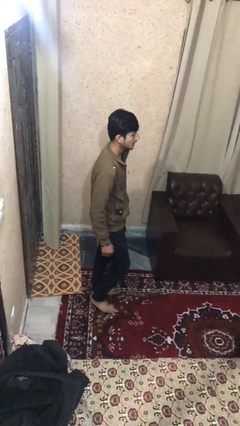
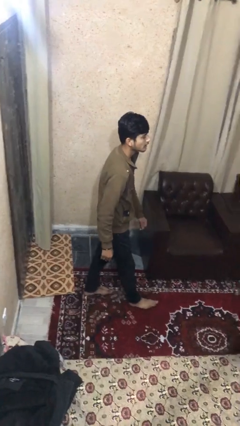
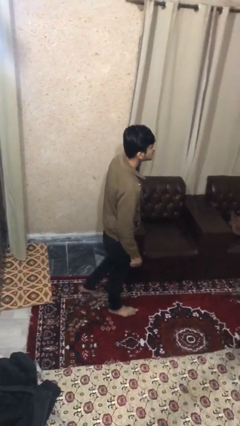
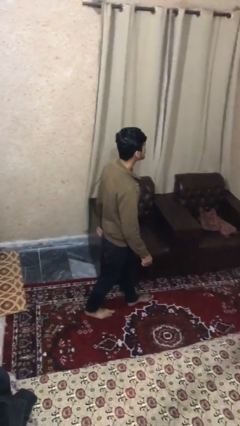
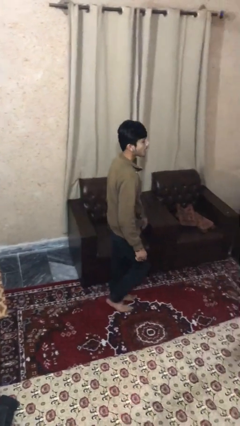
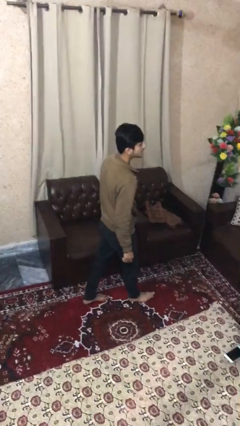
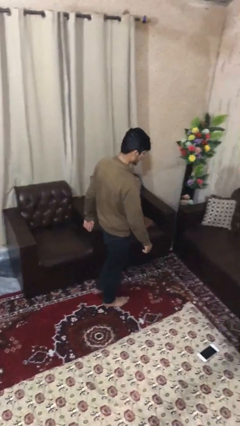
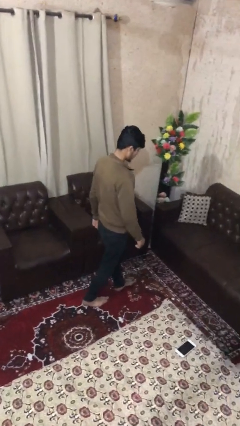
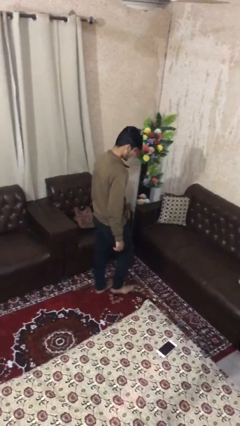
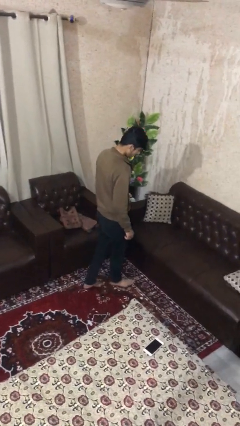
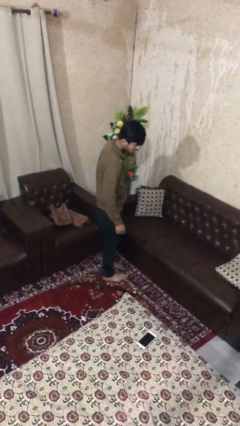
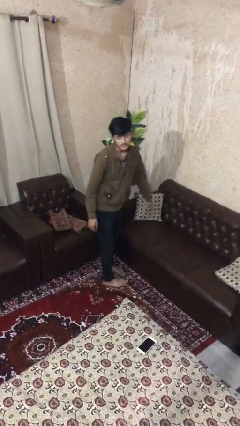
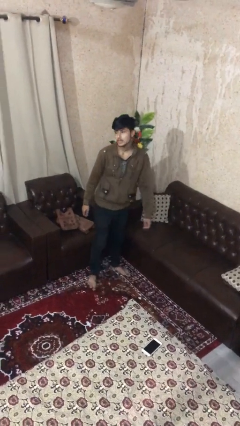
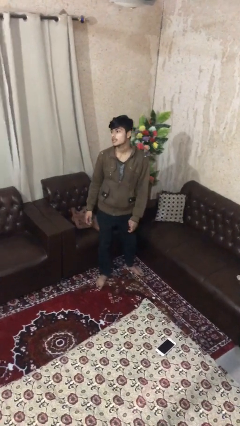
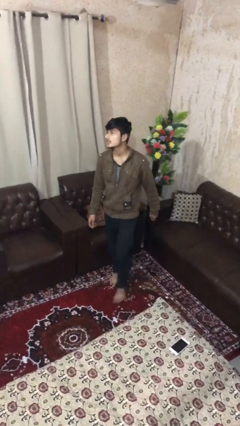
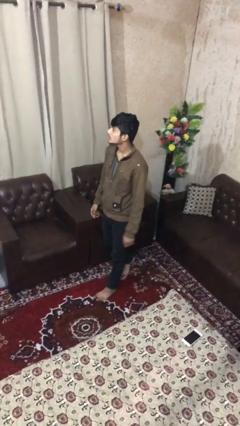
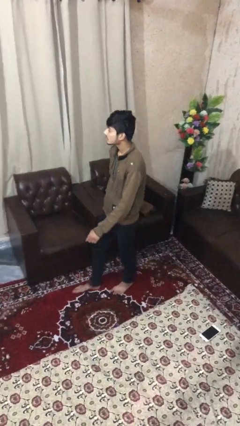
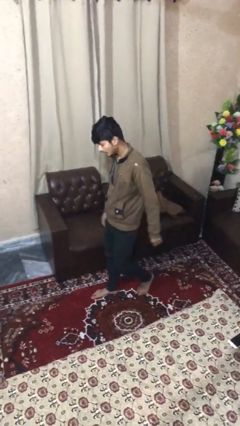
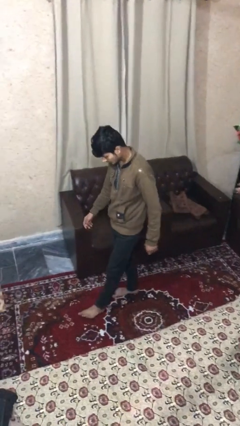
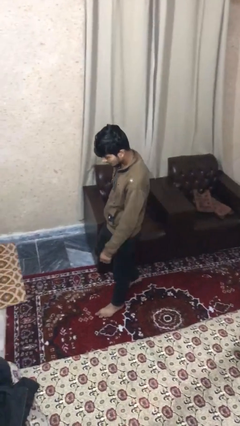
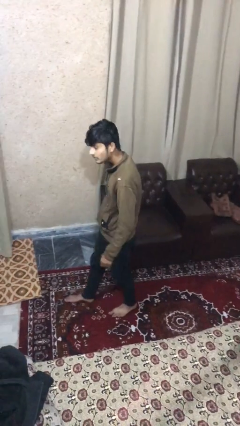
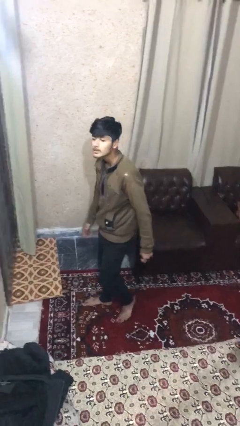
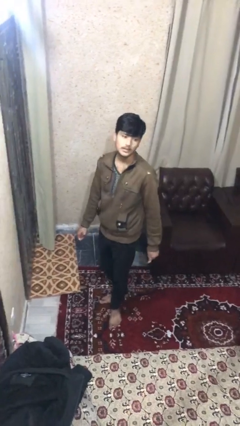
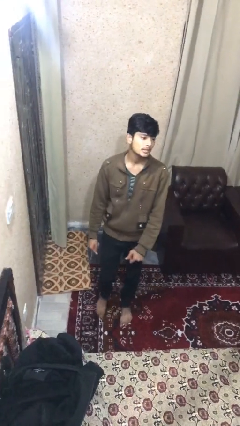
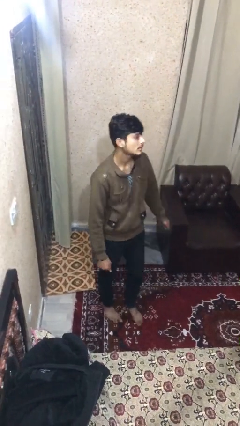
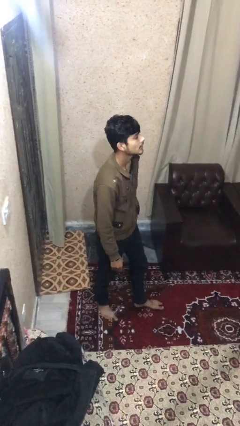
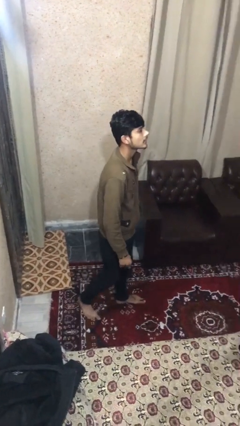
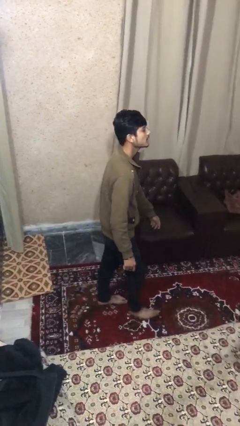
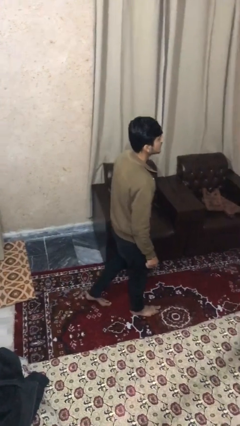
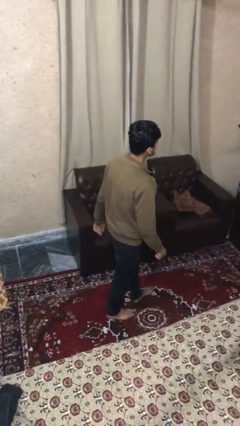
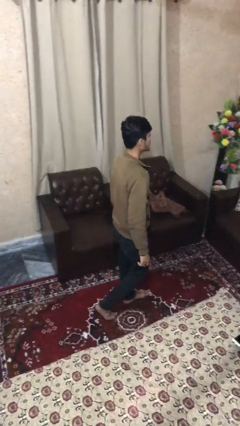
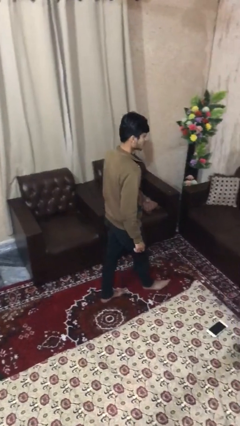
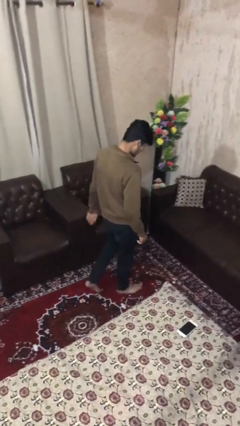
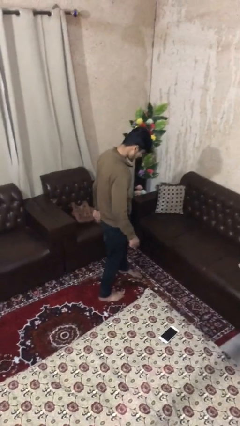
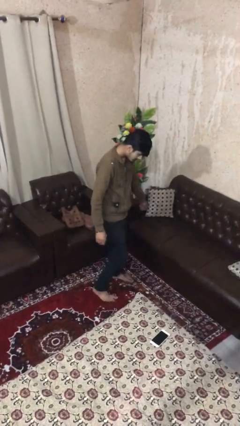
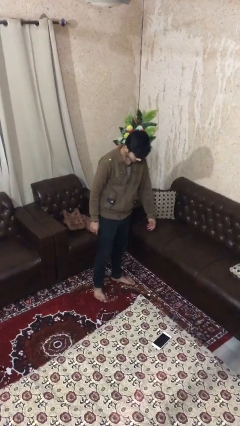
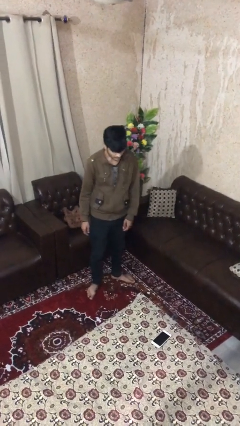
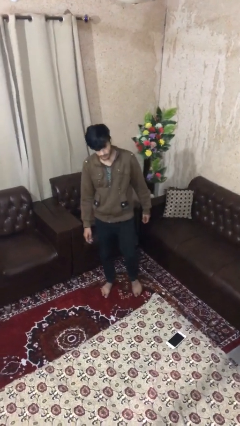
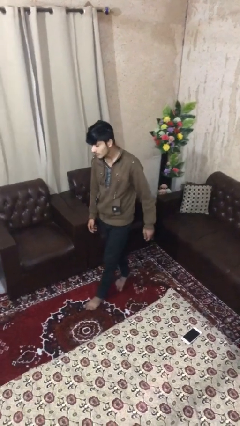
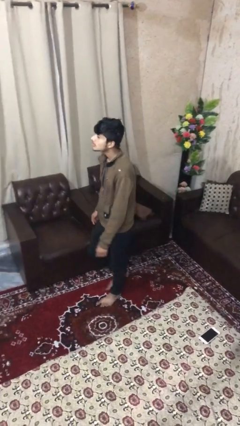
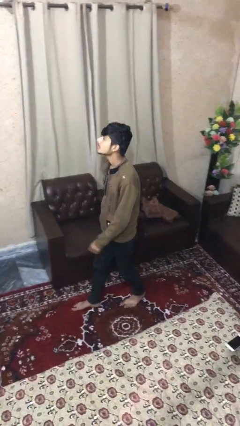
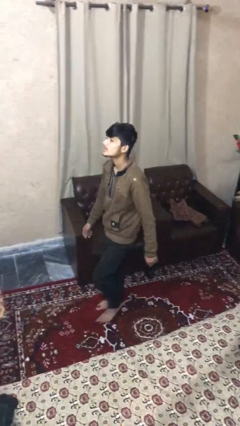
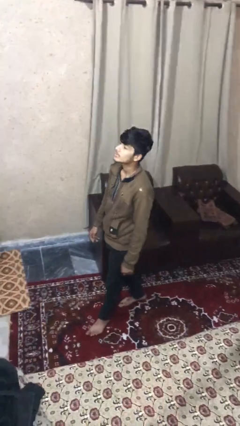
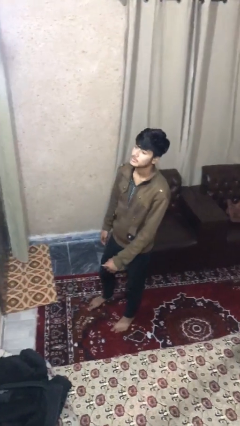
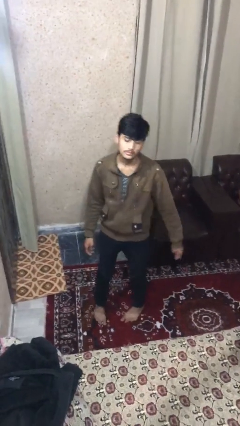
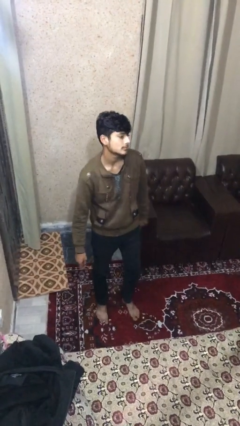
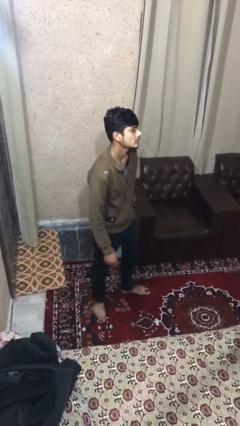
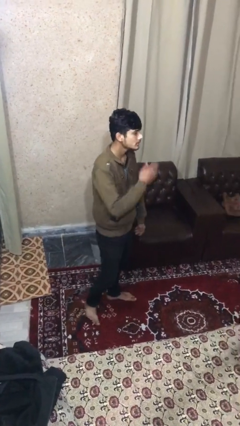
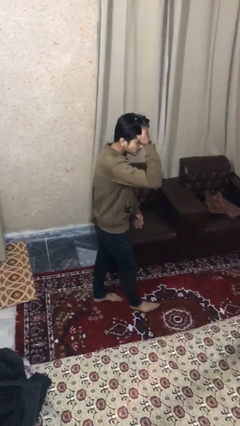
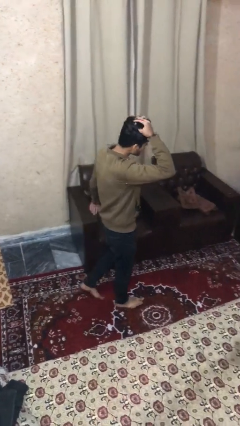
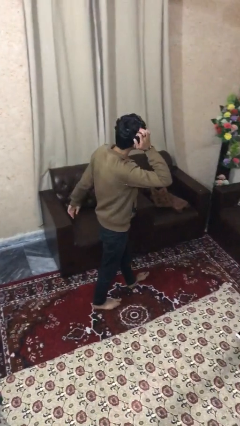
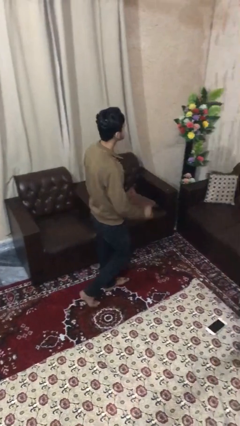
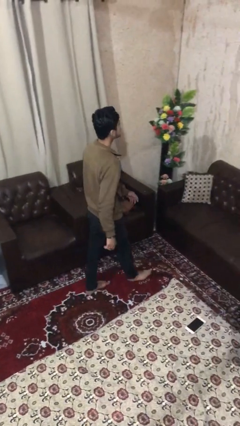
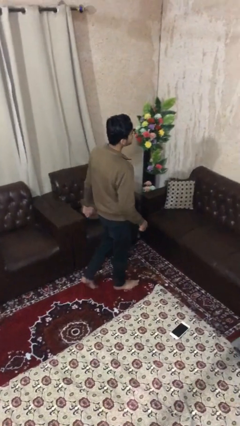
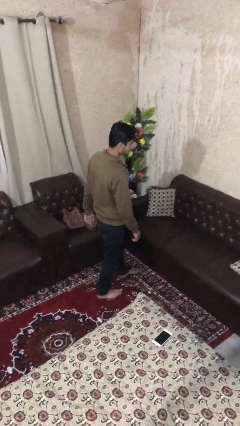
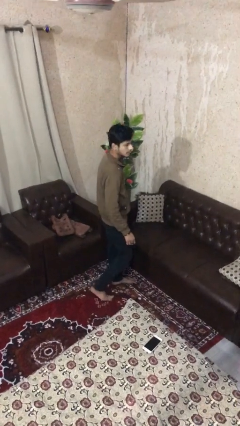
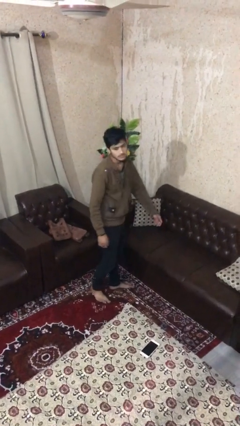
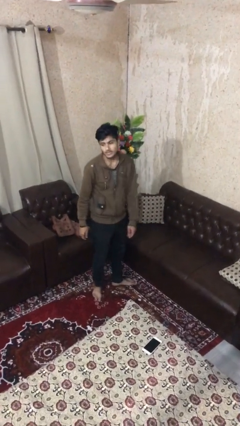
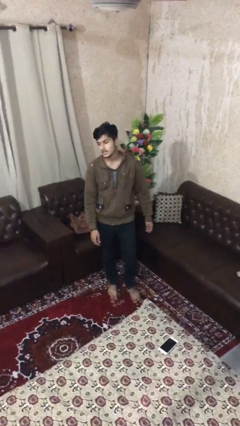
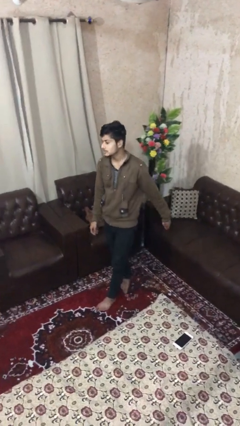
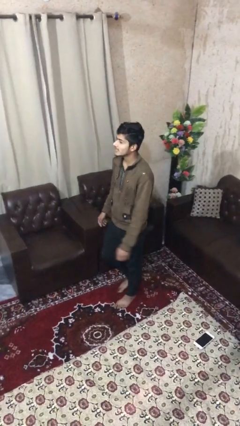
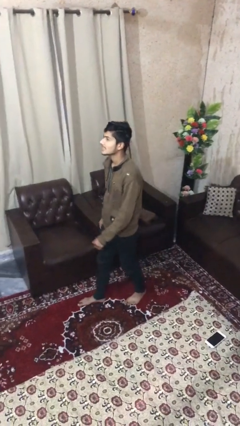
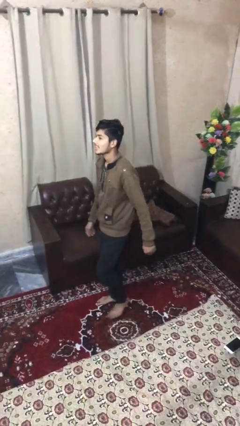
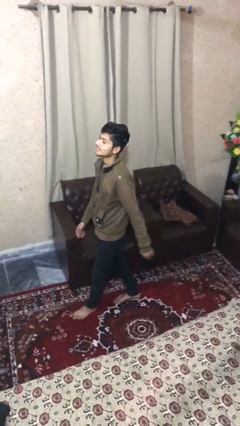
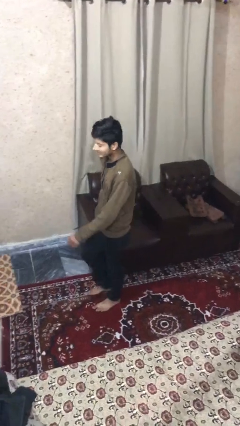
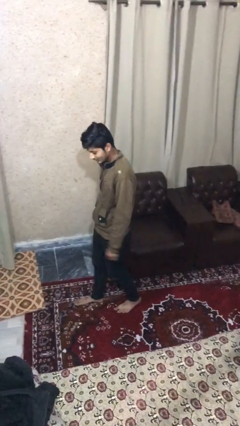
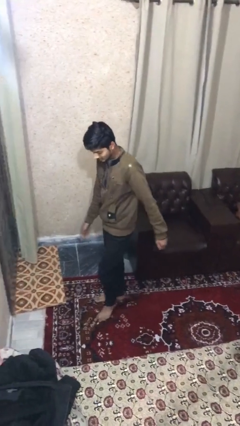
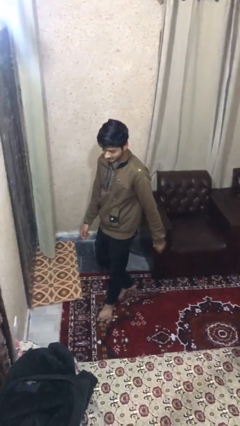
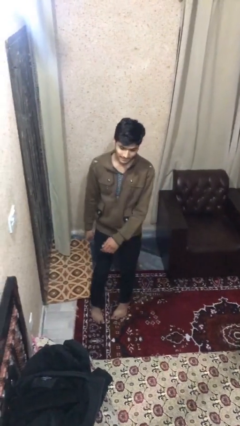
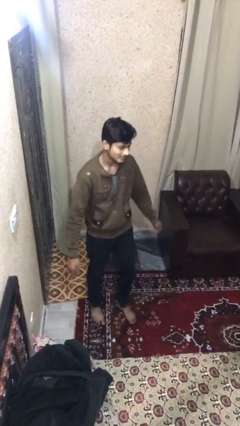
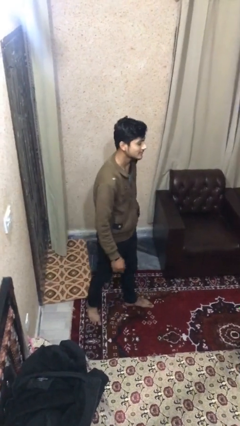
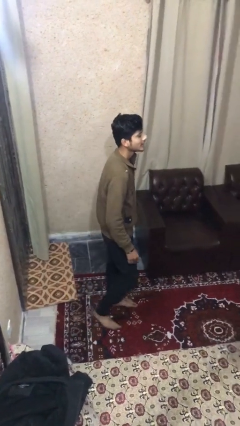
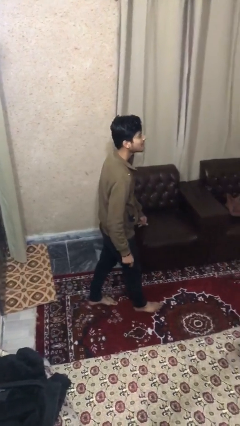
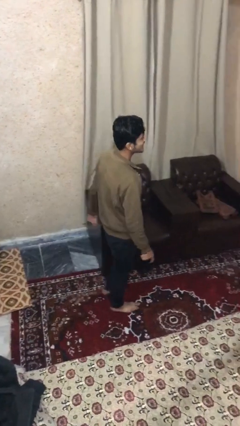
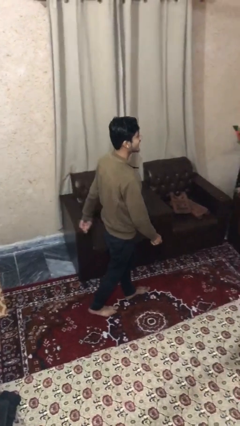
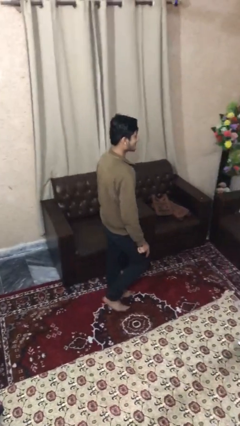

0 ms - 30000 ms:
person walks

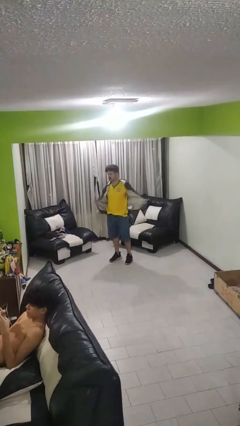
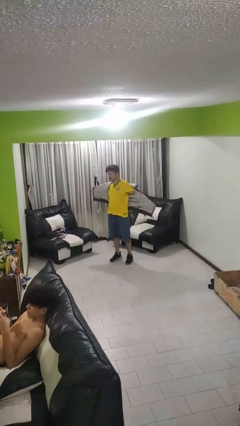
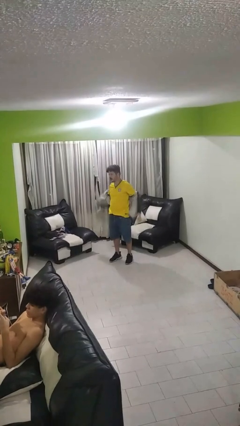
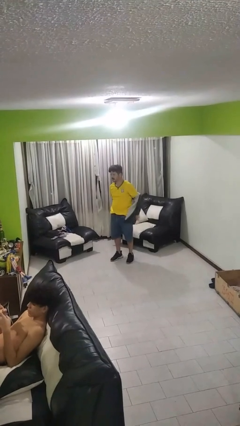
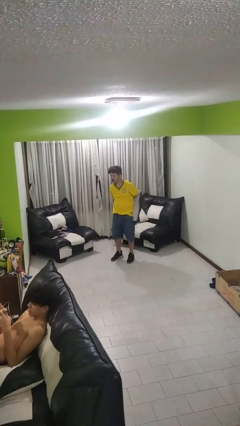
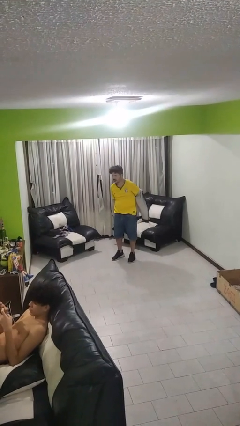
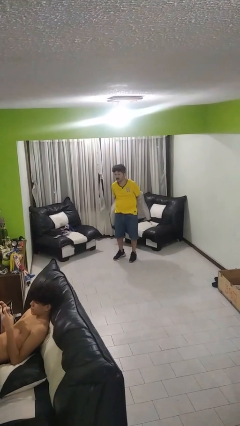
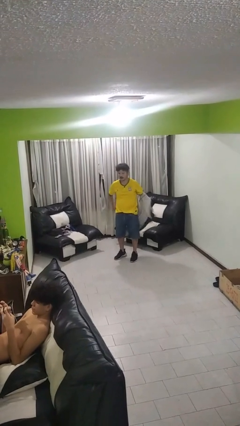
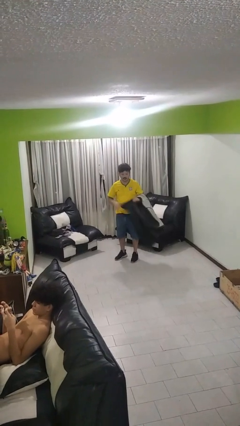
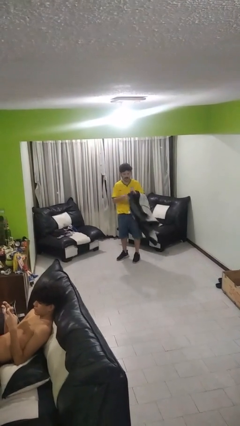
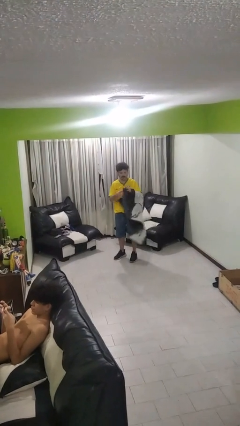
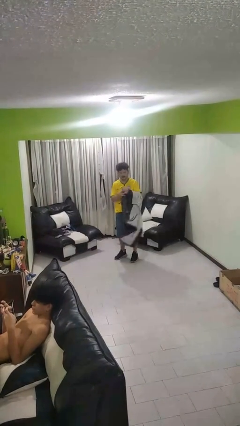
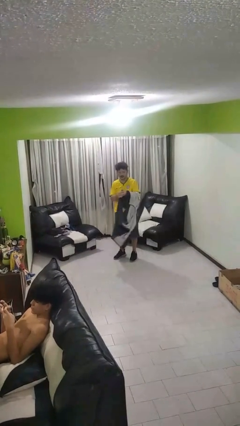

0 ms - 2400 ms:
person takes off jacket

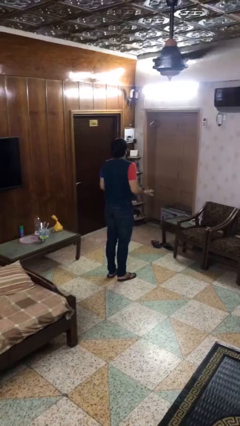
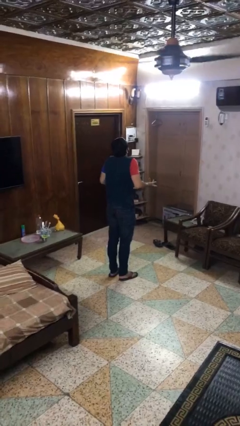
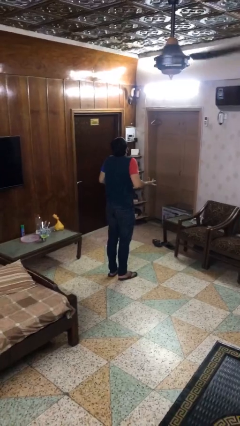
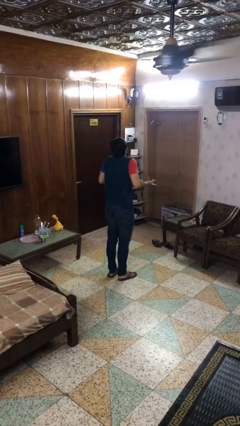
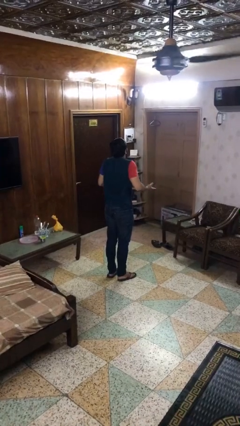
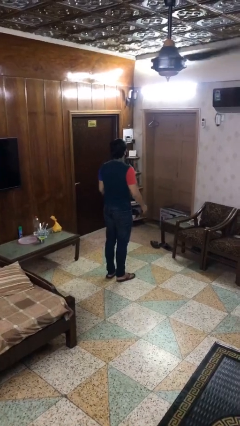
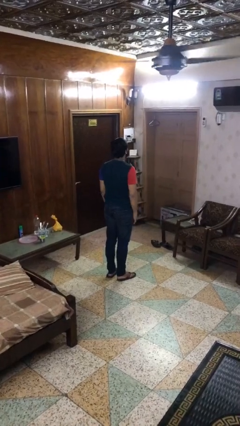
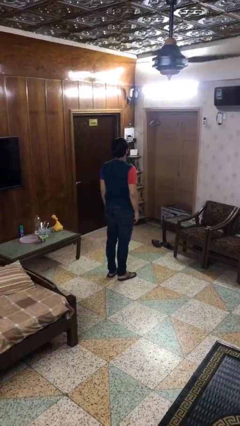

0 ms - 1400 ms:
person shrugs
